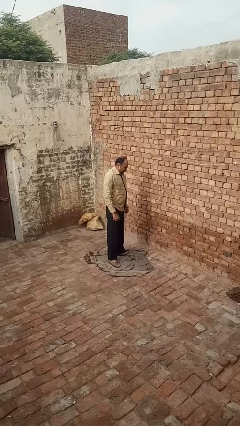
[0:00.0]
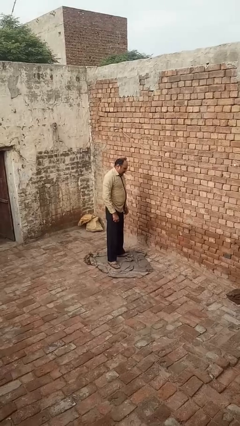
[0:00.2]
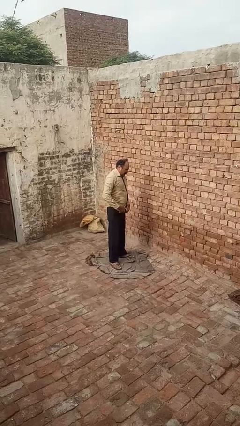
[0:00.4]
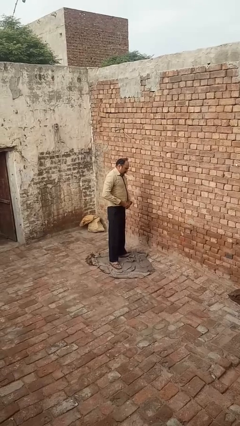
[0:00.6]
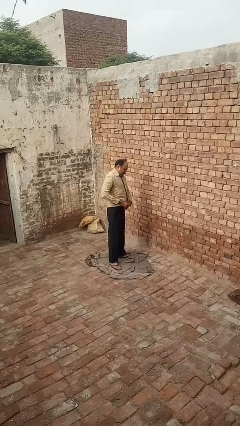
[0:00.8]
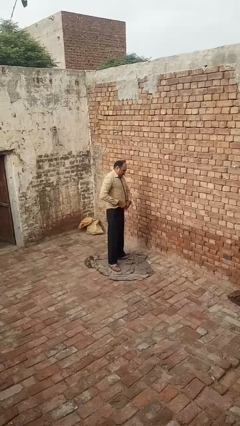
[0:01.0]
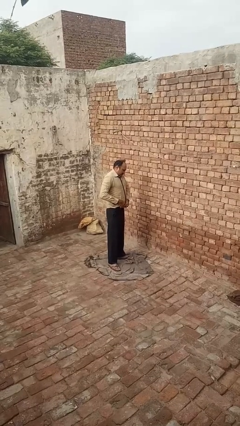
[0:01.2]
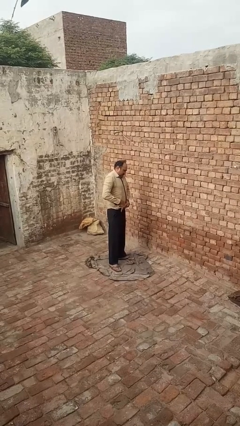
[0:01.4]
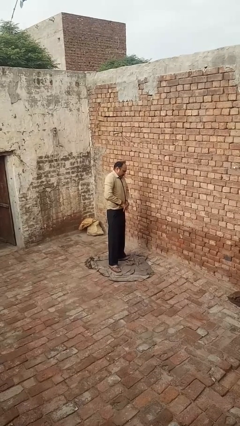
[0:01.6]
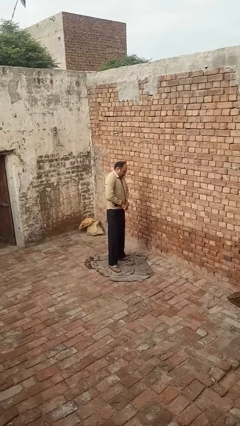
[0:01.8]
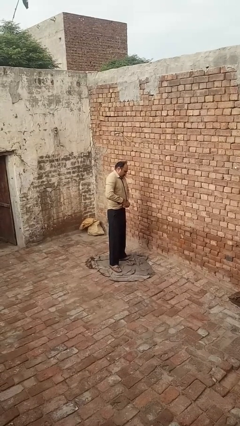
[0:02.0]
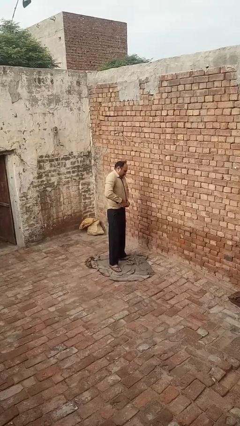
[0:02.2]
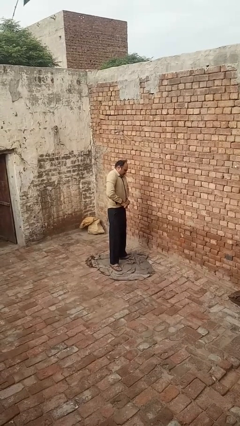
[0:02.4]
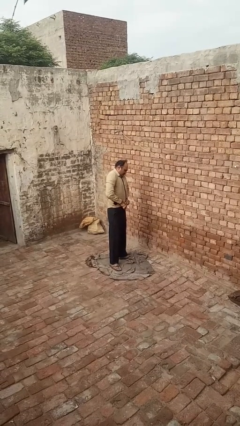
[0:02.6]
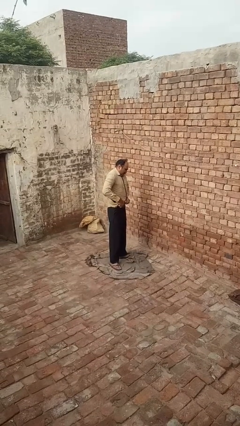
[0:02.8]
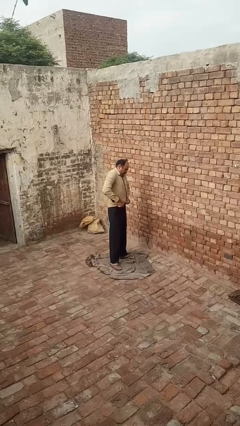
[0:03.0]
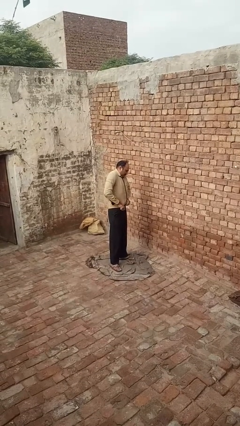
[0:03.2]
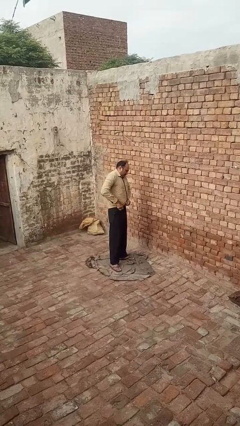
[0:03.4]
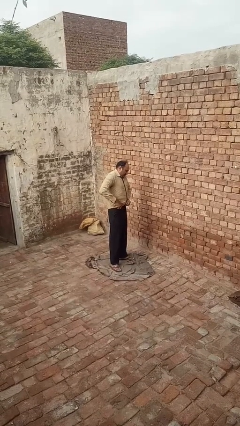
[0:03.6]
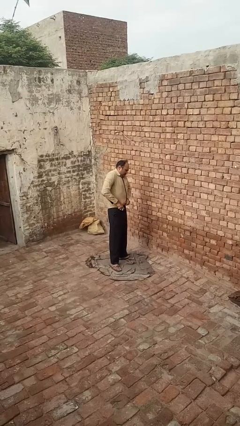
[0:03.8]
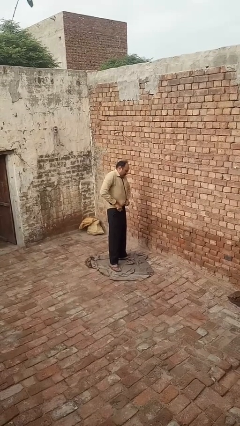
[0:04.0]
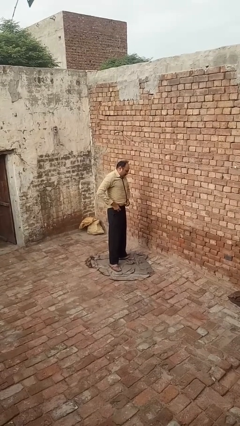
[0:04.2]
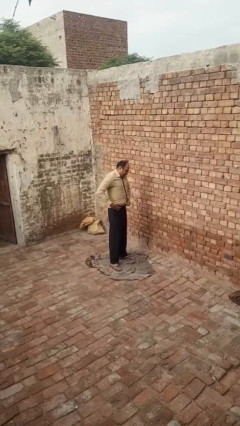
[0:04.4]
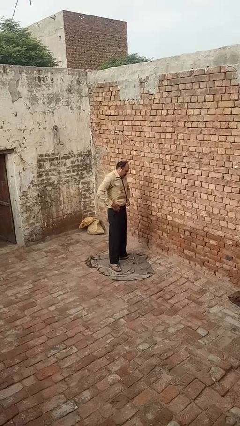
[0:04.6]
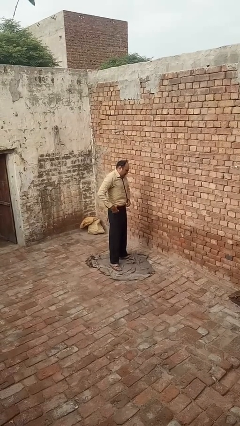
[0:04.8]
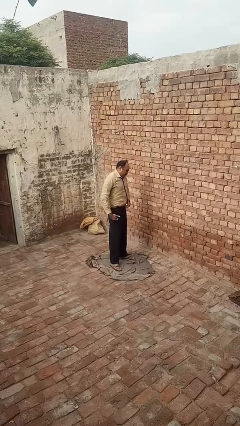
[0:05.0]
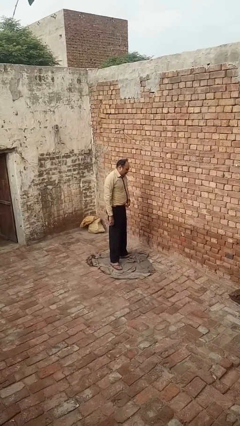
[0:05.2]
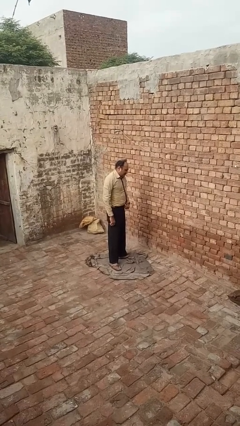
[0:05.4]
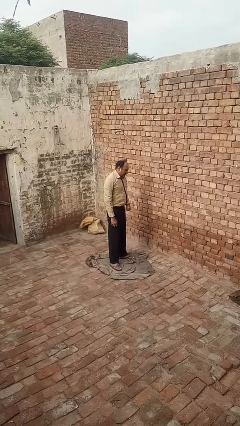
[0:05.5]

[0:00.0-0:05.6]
person tucks in shirt

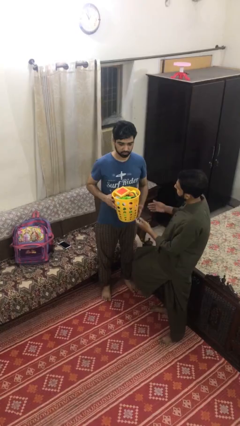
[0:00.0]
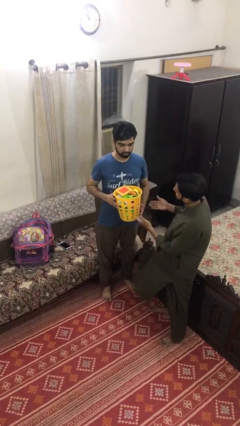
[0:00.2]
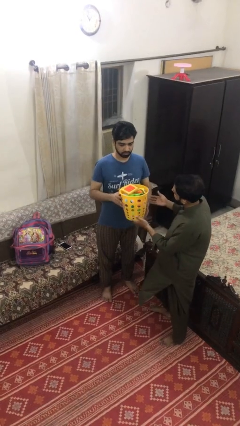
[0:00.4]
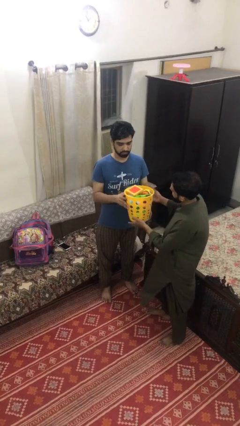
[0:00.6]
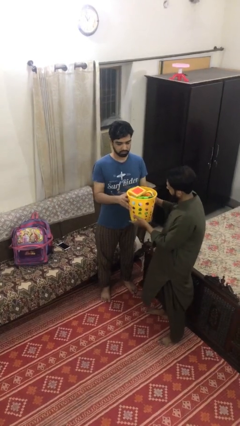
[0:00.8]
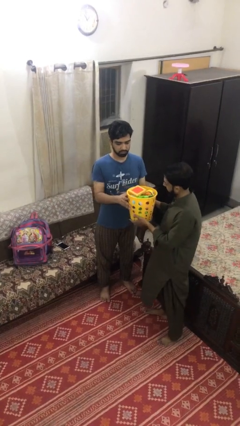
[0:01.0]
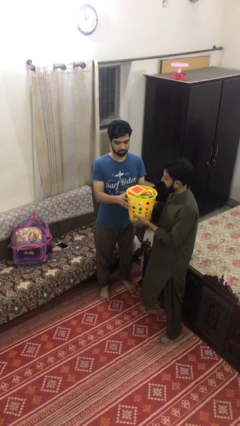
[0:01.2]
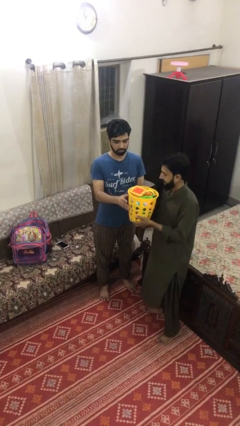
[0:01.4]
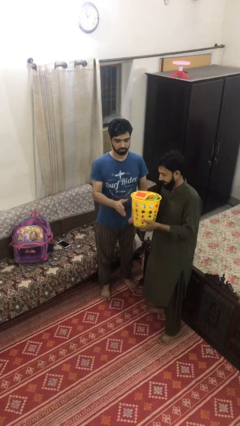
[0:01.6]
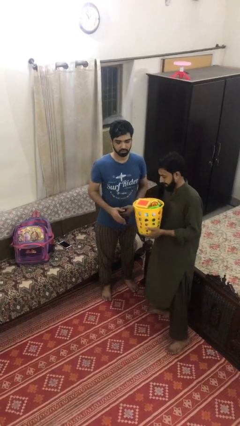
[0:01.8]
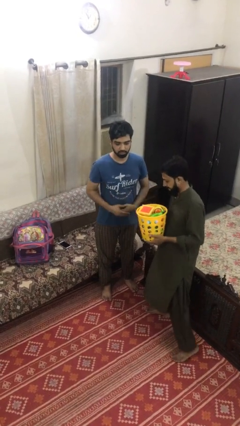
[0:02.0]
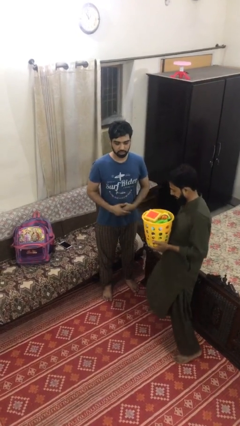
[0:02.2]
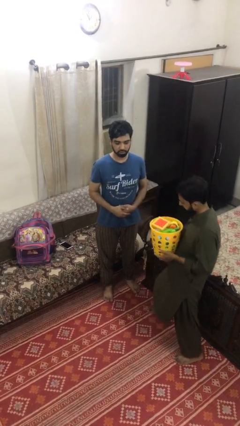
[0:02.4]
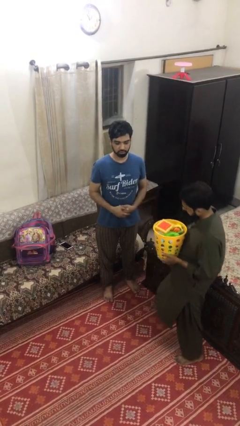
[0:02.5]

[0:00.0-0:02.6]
person transfers object to person

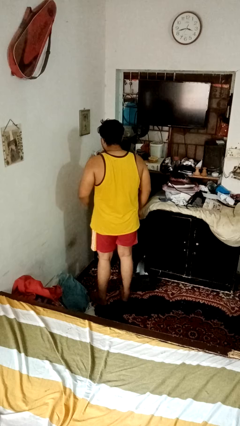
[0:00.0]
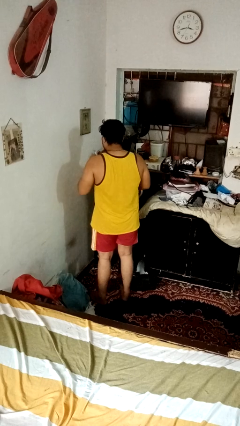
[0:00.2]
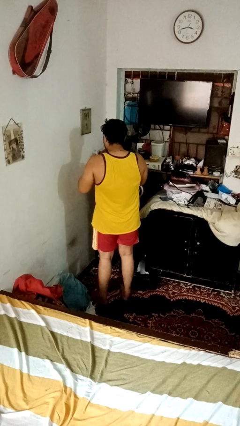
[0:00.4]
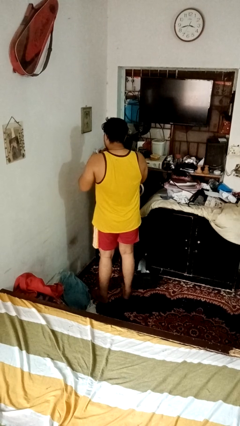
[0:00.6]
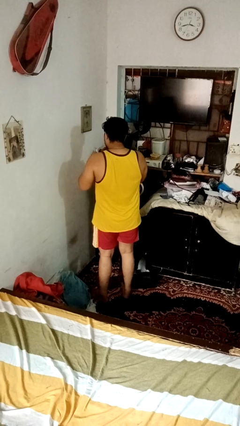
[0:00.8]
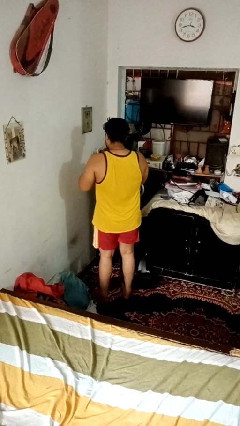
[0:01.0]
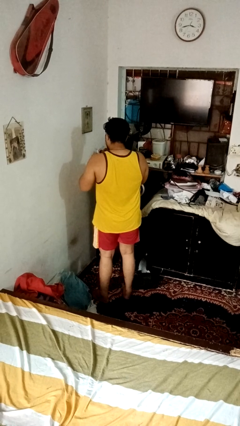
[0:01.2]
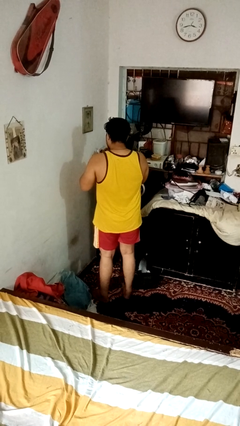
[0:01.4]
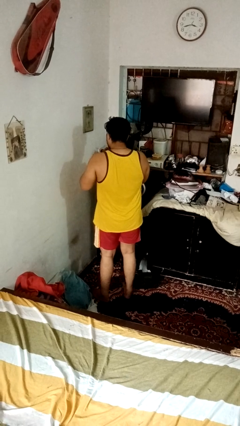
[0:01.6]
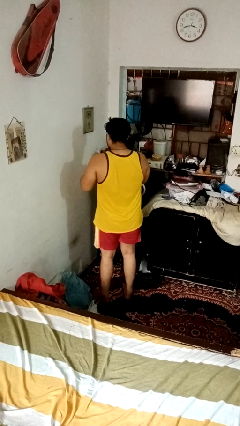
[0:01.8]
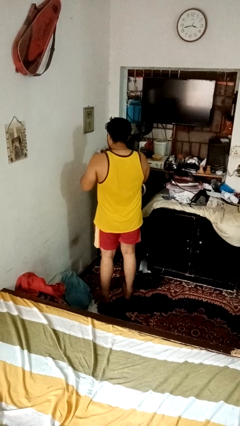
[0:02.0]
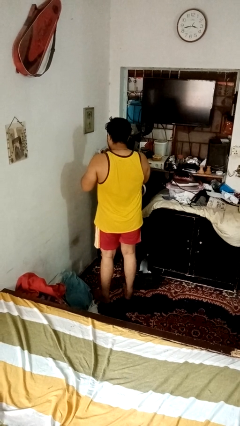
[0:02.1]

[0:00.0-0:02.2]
person files fingernails

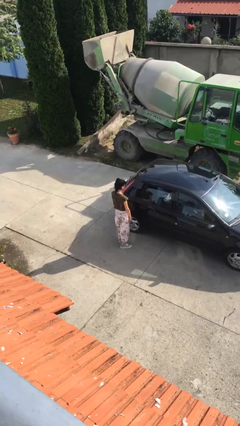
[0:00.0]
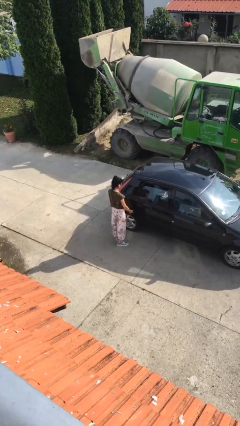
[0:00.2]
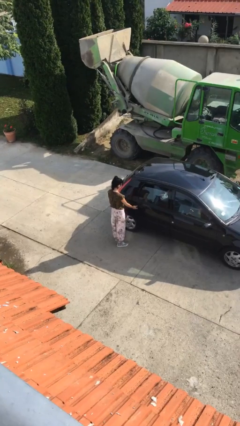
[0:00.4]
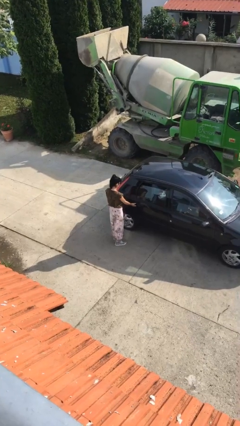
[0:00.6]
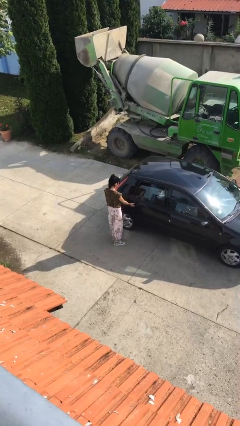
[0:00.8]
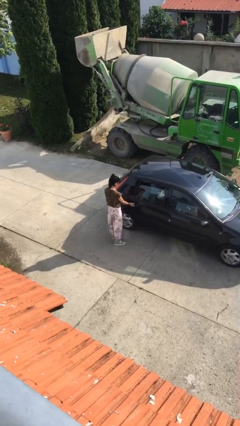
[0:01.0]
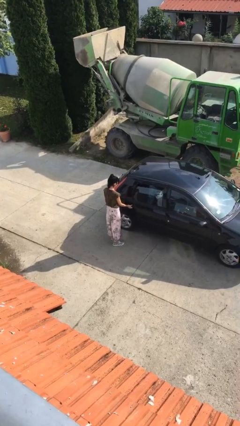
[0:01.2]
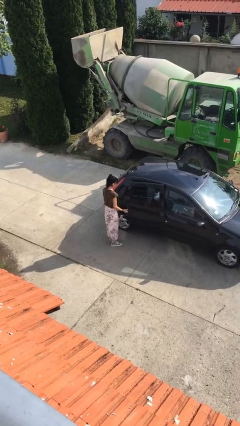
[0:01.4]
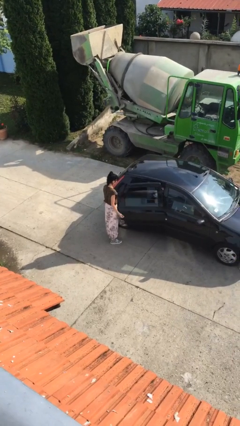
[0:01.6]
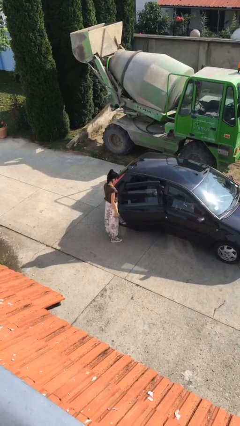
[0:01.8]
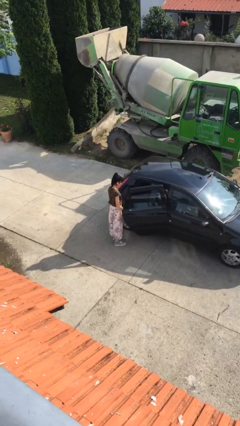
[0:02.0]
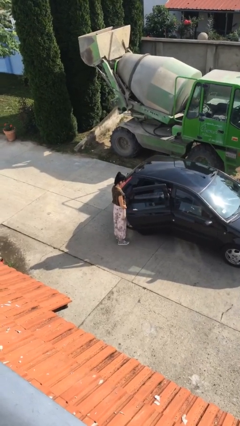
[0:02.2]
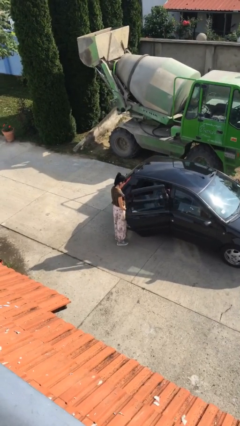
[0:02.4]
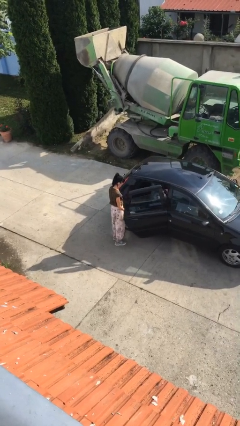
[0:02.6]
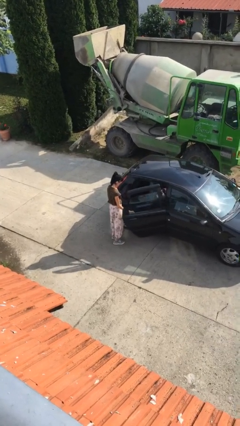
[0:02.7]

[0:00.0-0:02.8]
person opens car door

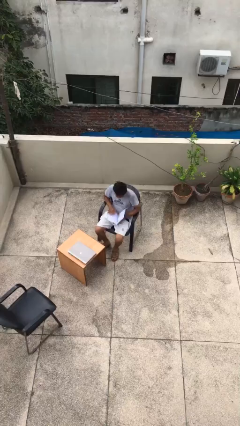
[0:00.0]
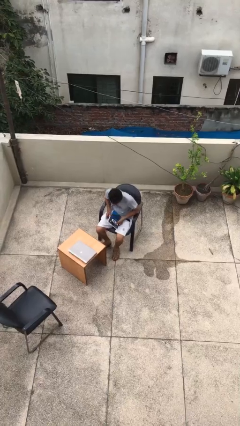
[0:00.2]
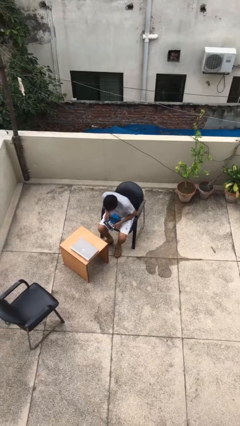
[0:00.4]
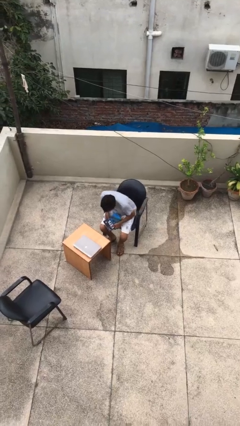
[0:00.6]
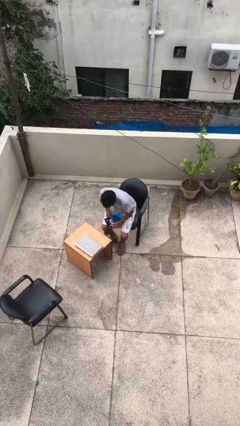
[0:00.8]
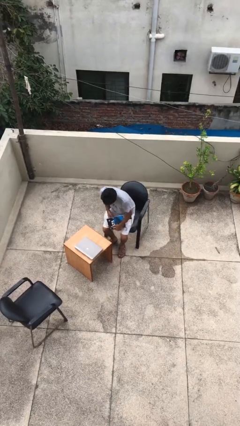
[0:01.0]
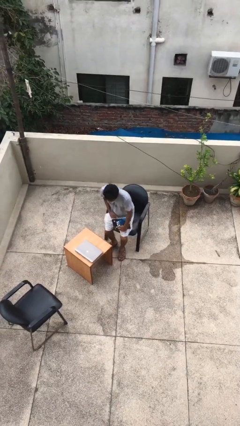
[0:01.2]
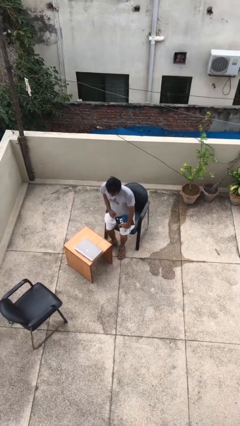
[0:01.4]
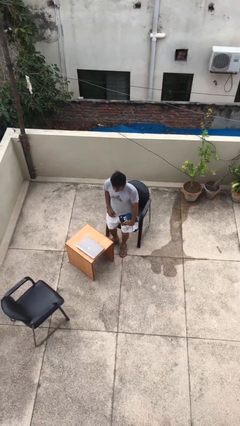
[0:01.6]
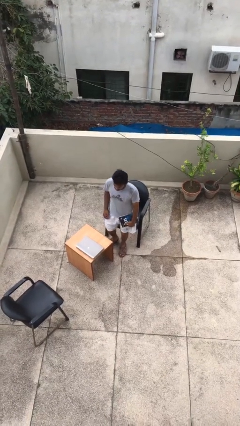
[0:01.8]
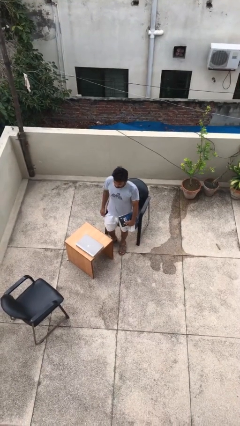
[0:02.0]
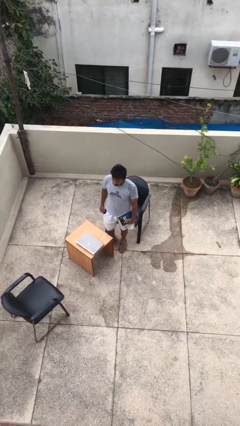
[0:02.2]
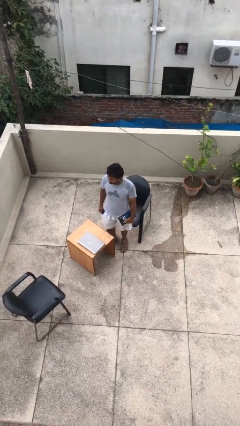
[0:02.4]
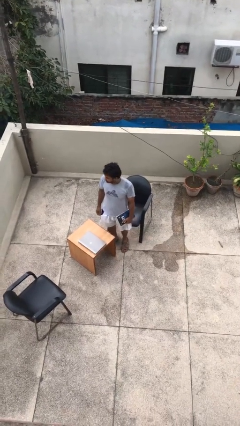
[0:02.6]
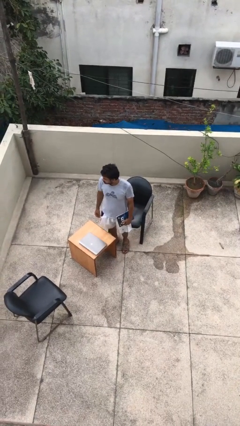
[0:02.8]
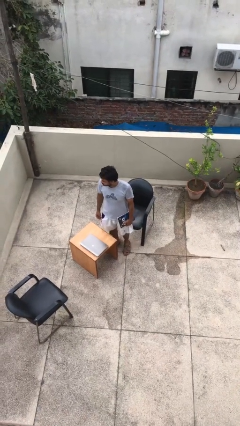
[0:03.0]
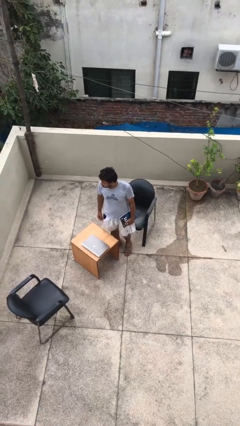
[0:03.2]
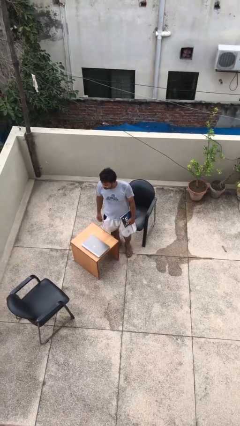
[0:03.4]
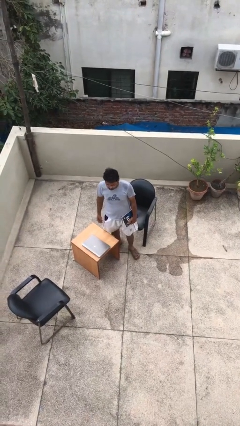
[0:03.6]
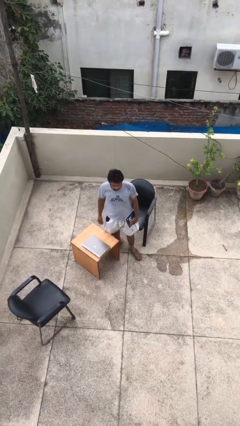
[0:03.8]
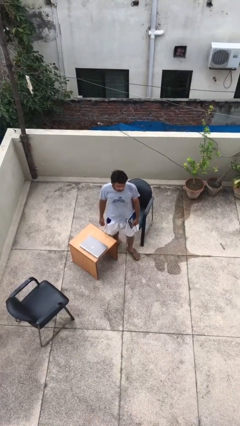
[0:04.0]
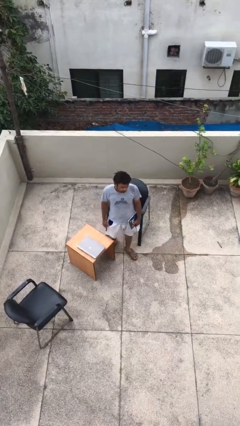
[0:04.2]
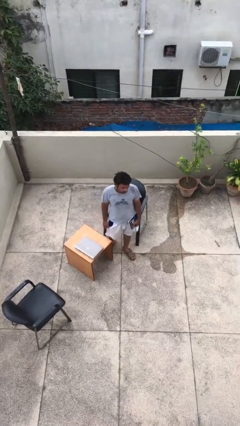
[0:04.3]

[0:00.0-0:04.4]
person stands up
